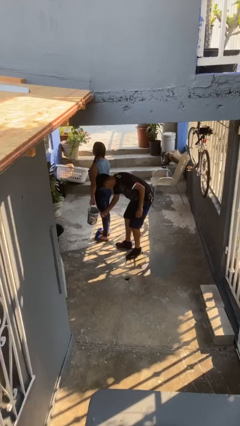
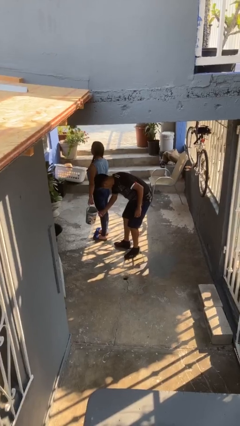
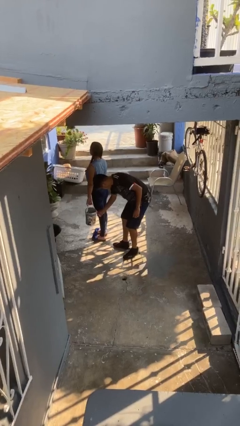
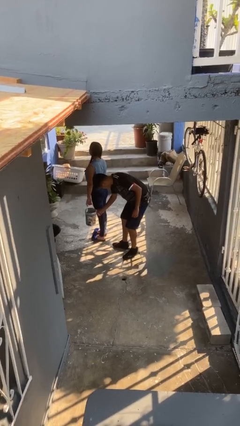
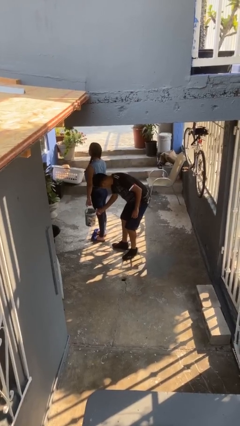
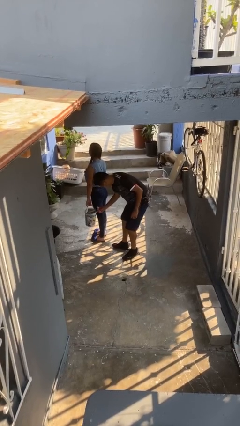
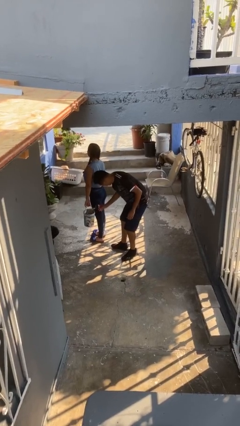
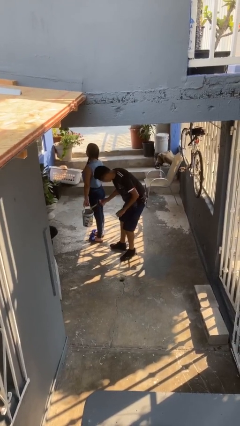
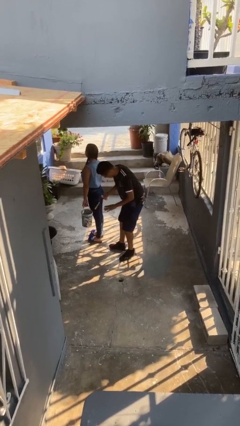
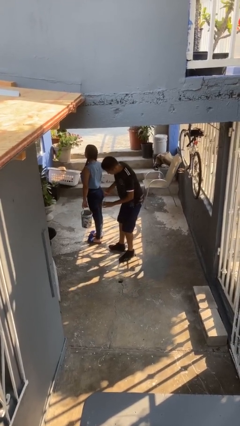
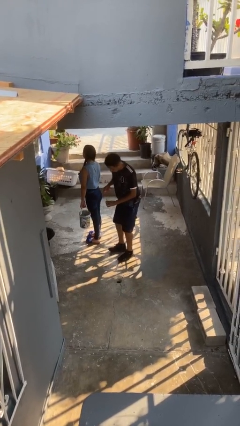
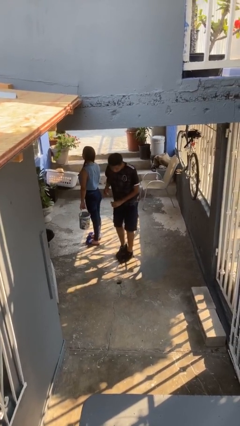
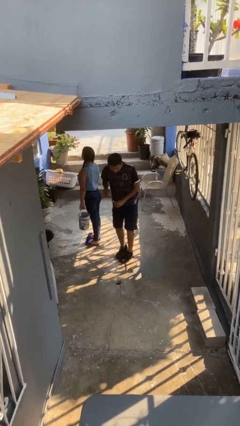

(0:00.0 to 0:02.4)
person steals object from person

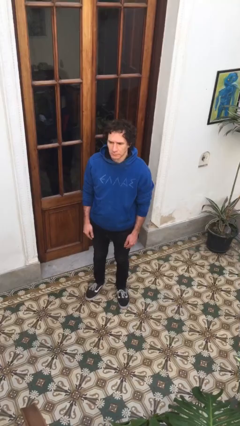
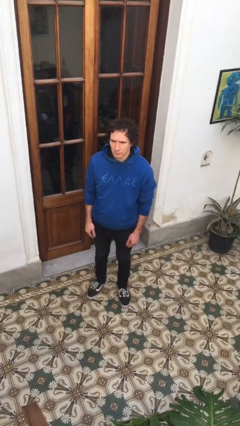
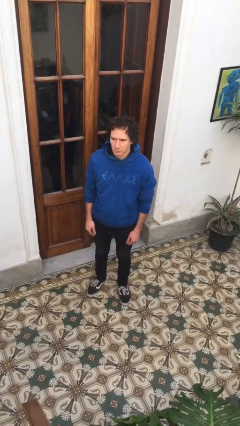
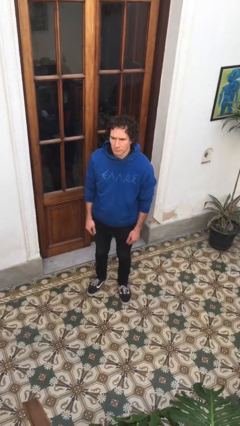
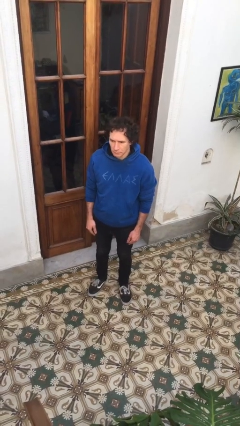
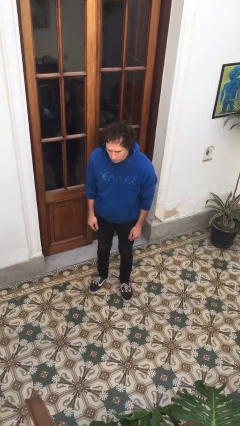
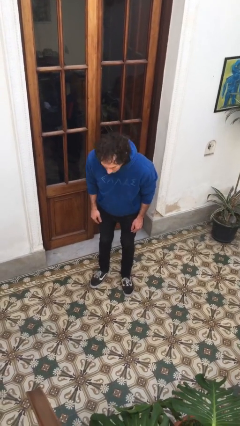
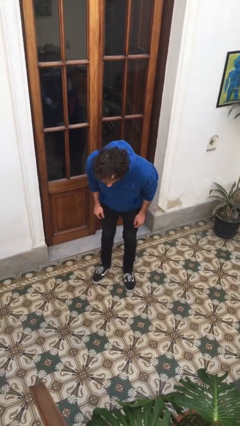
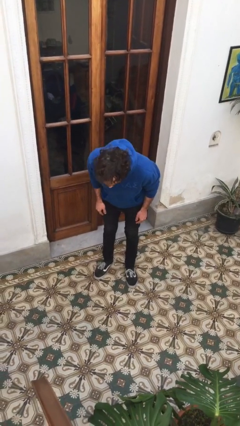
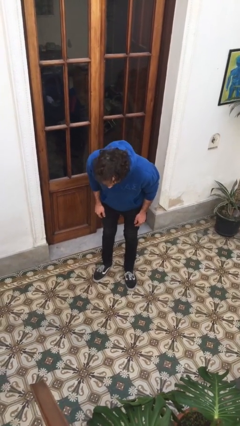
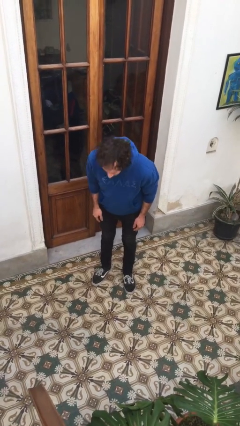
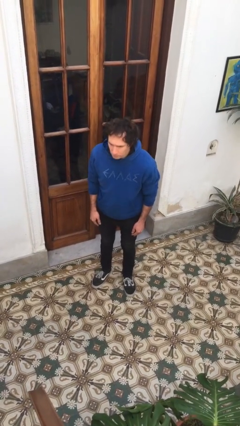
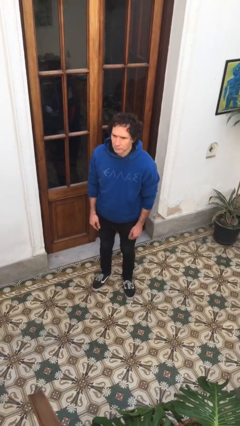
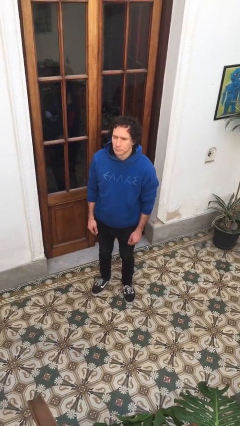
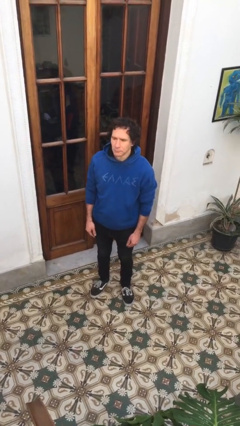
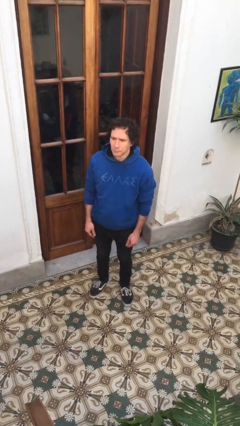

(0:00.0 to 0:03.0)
person bows

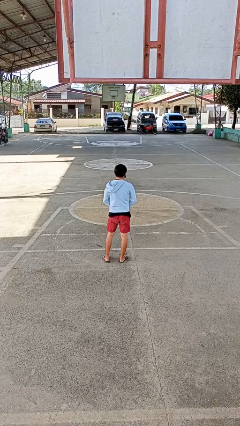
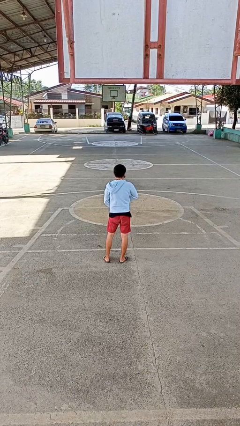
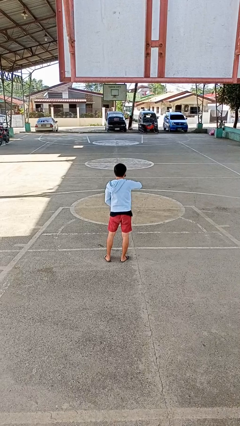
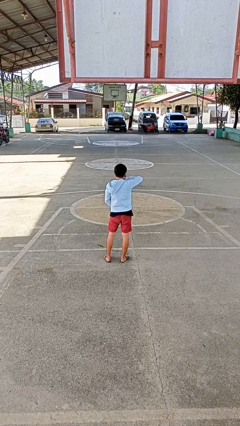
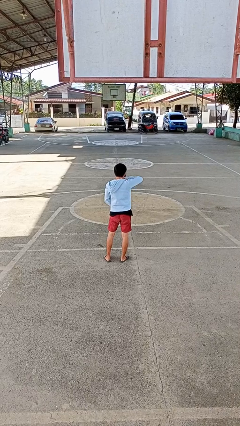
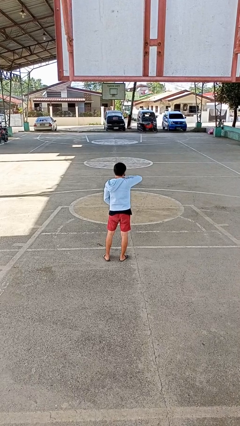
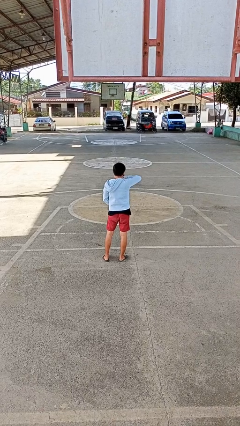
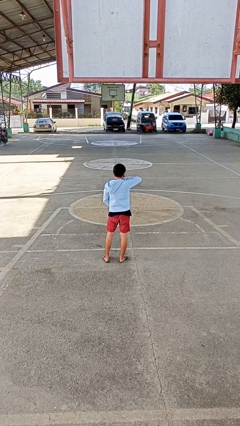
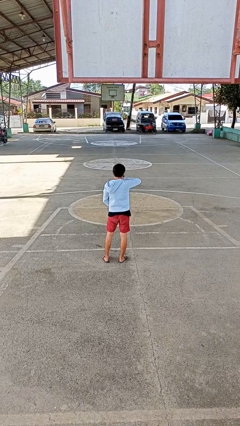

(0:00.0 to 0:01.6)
person zips up jacket

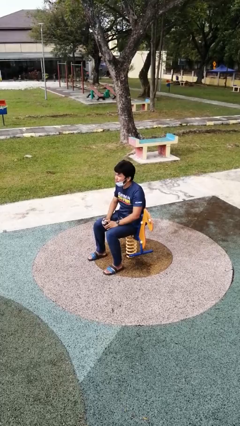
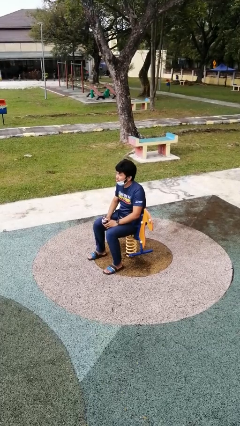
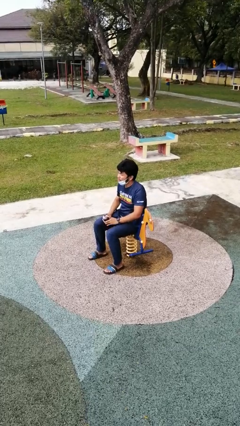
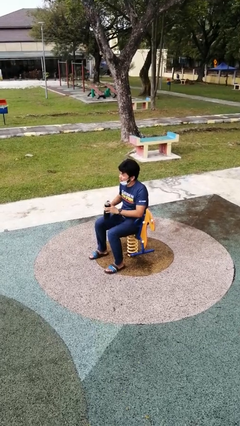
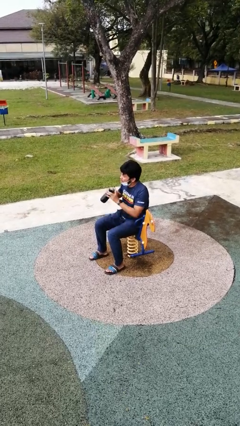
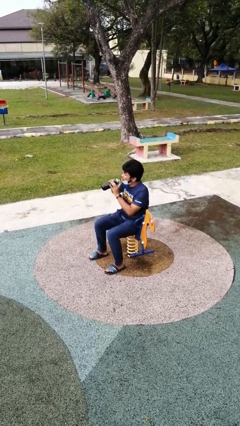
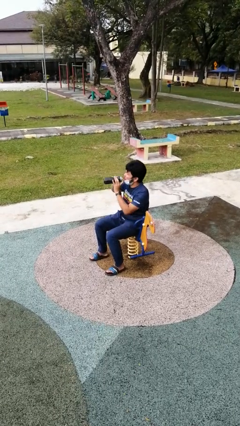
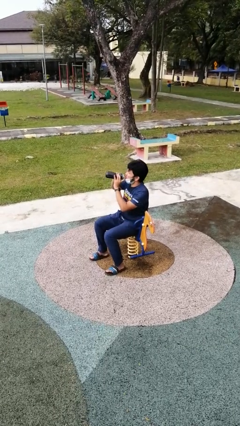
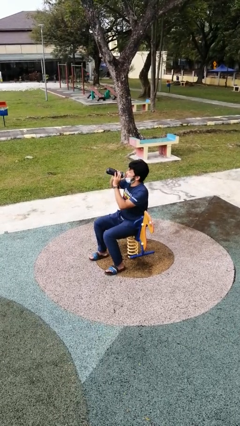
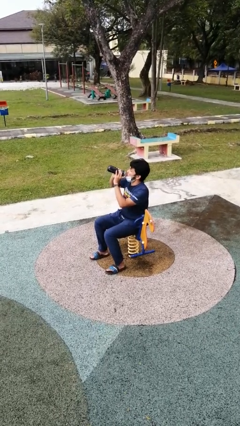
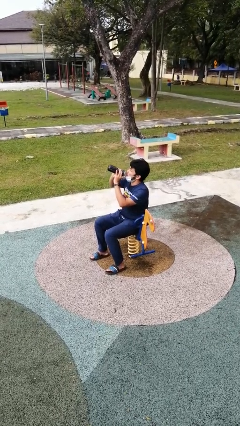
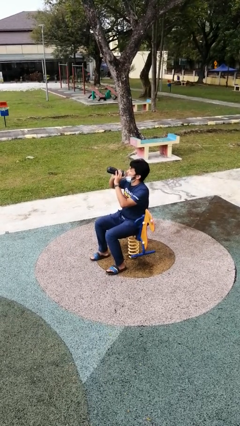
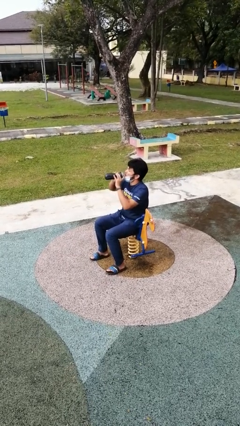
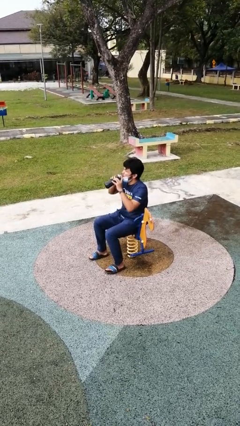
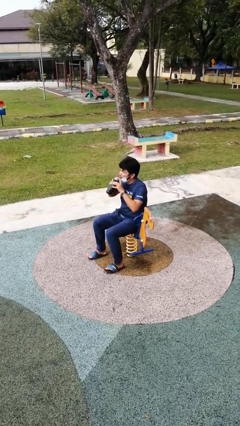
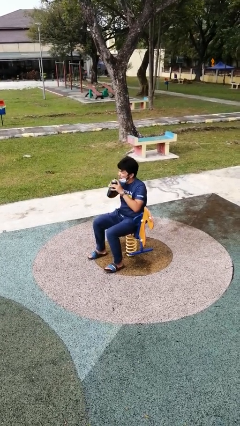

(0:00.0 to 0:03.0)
person drinks from bottle

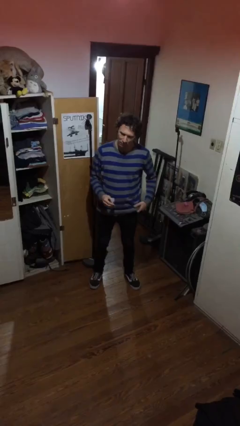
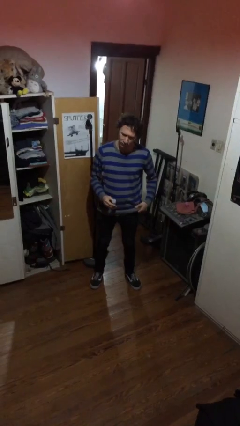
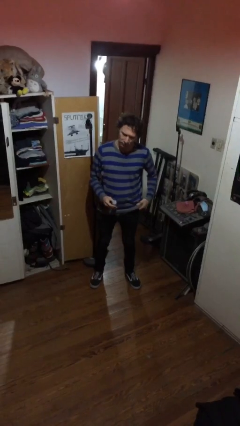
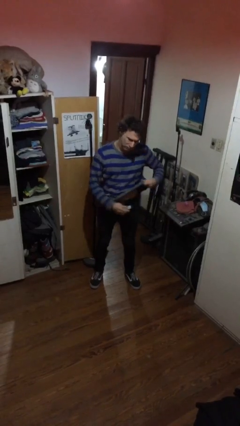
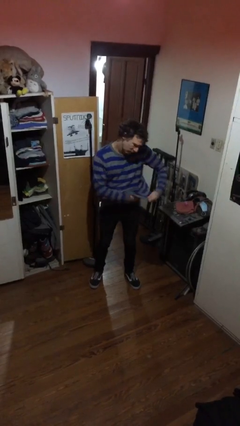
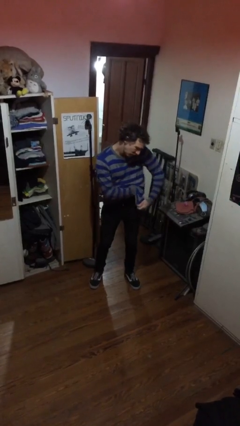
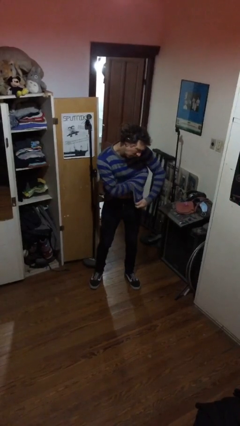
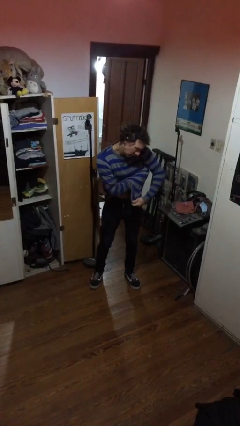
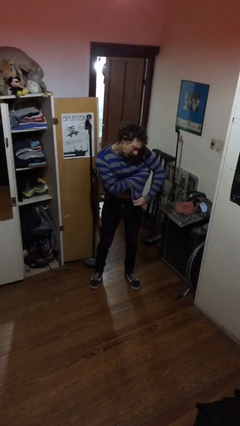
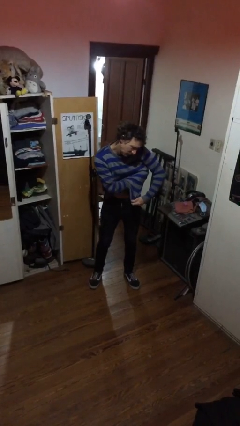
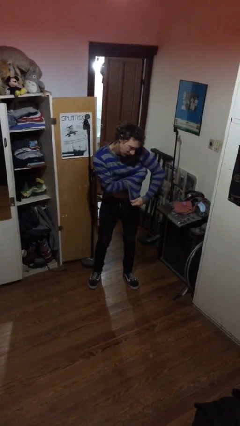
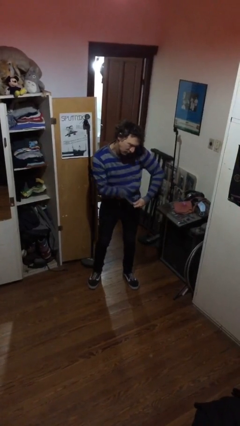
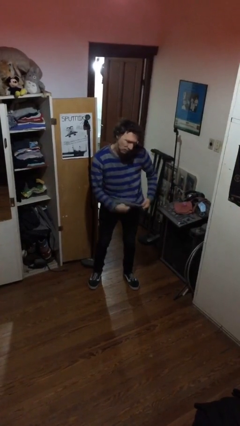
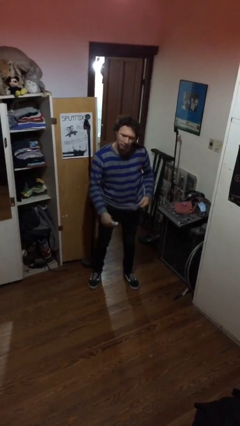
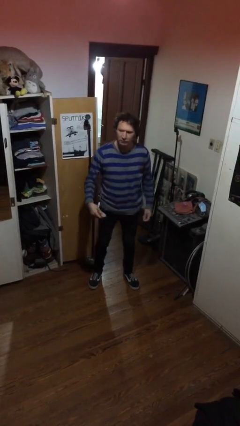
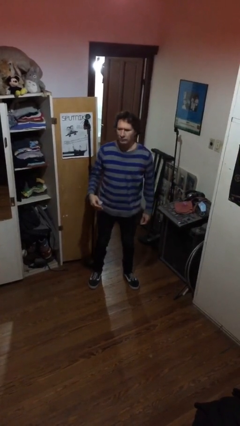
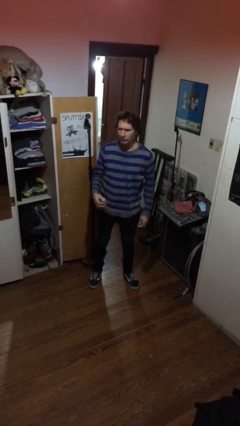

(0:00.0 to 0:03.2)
person applies deodorant

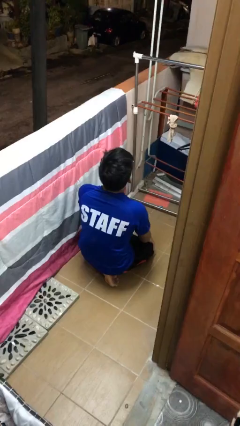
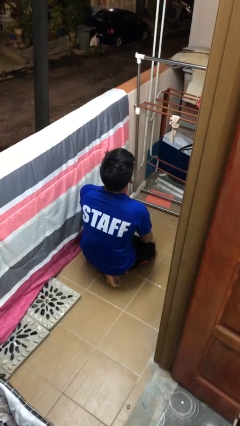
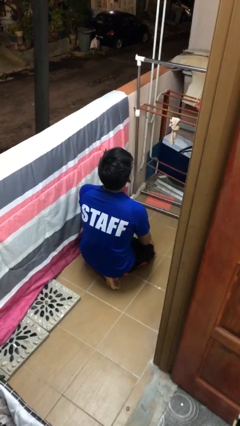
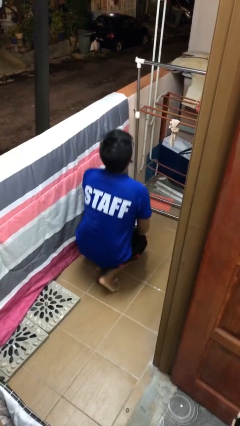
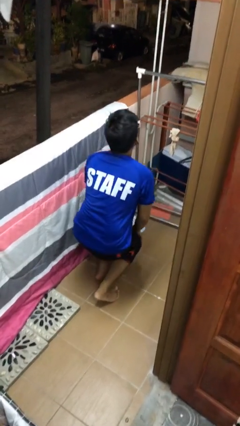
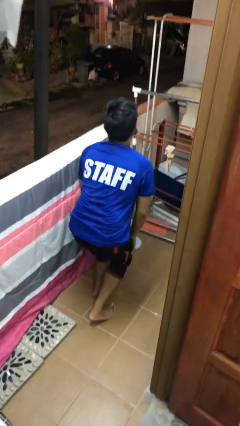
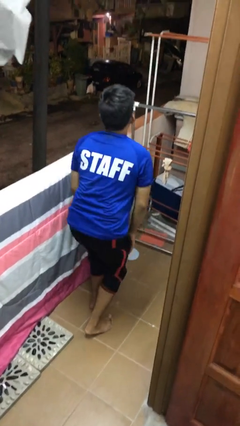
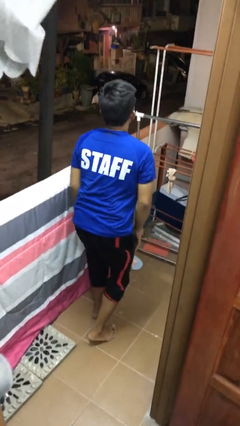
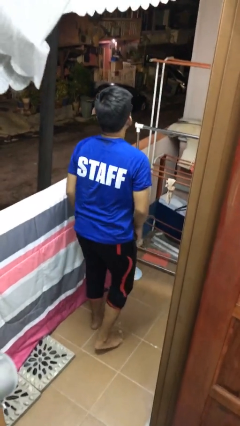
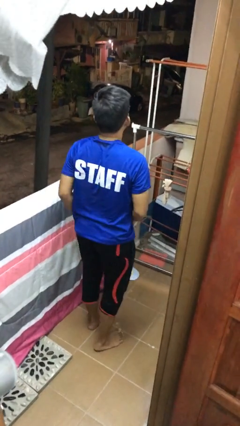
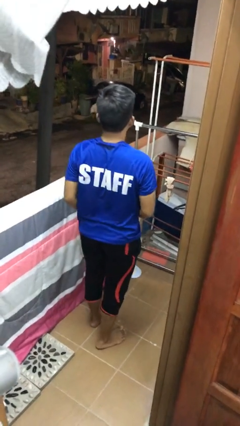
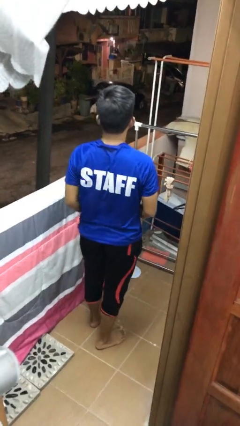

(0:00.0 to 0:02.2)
person stands up from floor

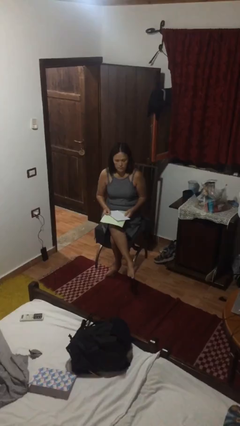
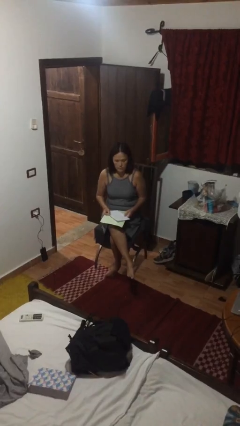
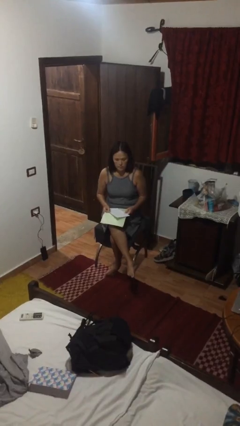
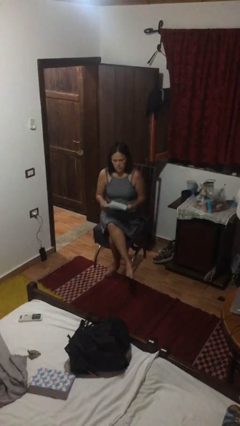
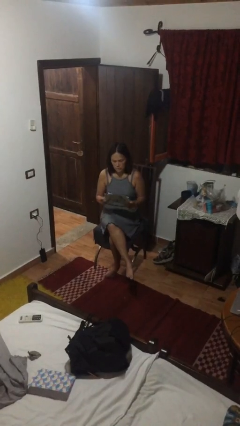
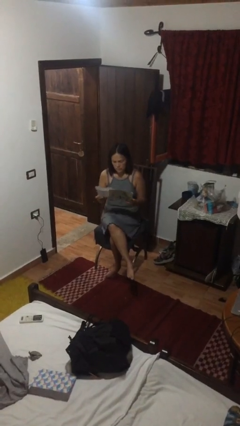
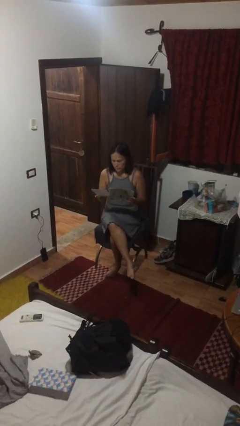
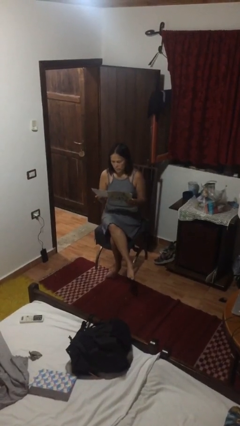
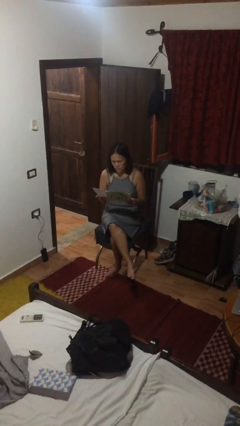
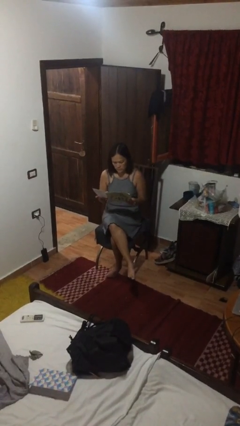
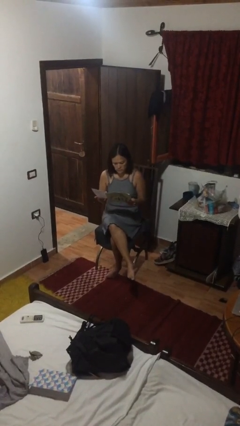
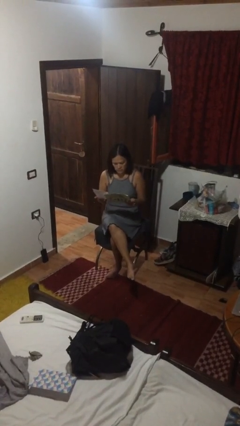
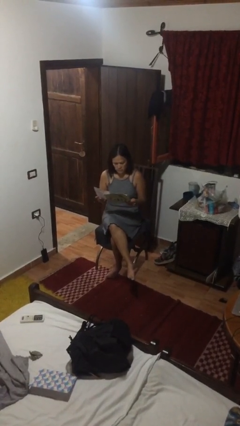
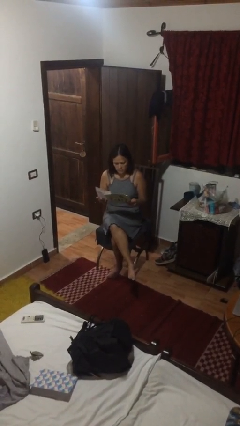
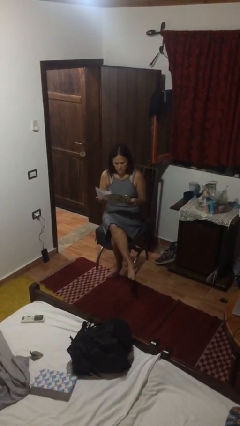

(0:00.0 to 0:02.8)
person reads newspaper
